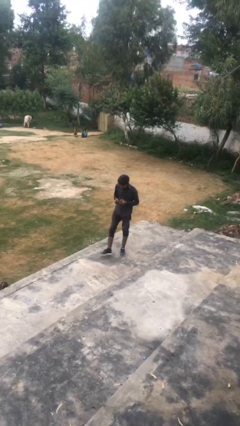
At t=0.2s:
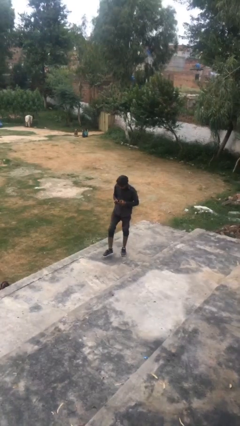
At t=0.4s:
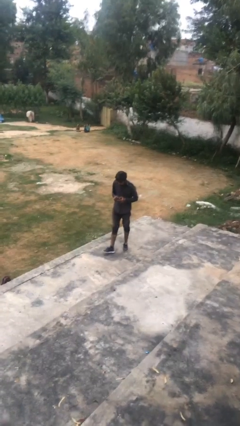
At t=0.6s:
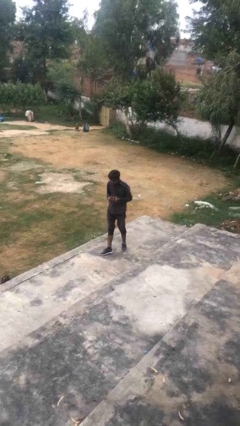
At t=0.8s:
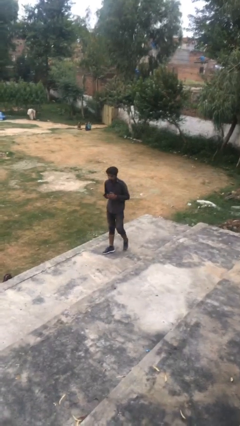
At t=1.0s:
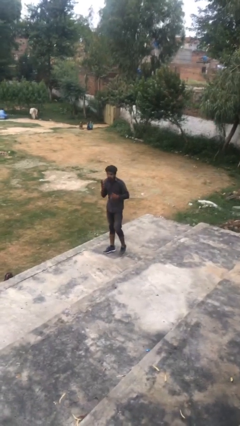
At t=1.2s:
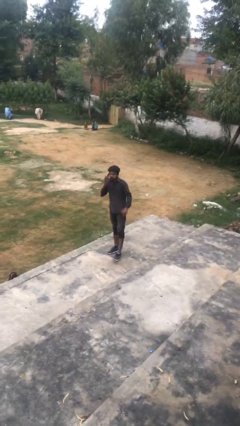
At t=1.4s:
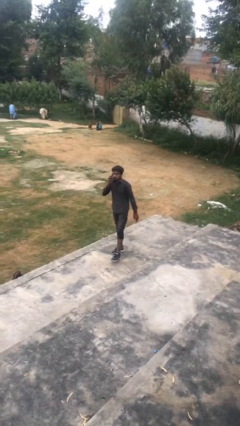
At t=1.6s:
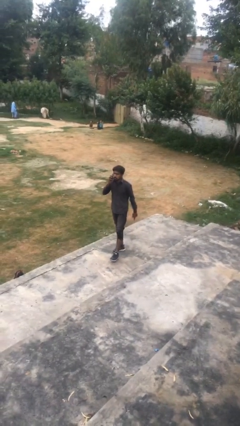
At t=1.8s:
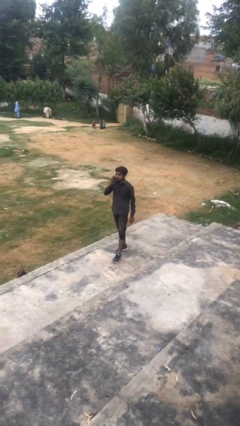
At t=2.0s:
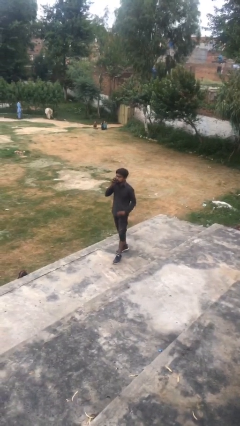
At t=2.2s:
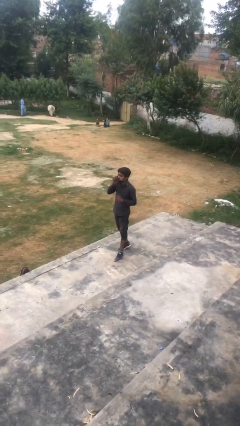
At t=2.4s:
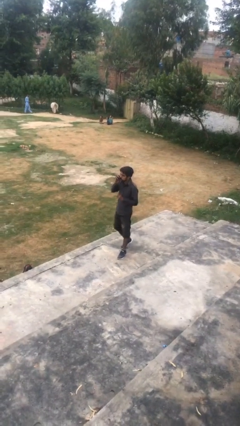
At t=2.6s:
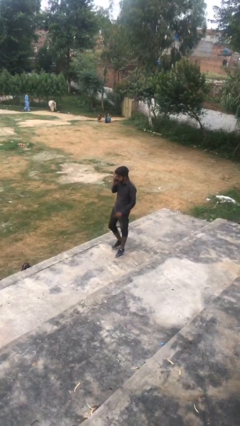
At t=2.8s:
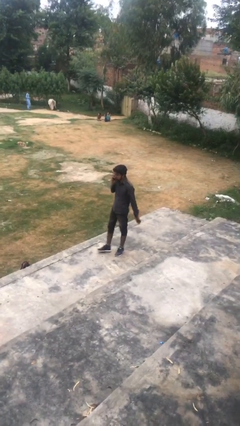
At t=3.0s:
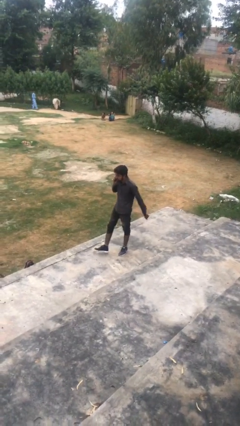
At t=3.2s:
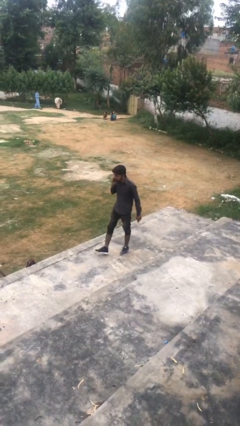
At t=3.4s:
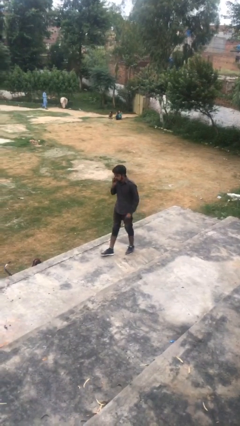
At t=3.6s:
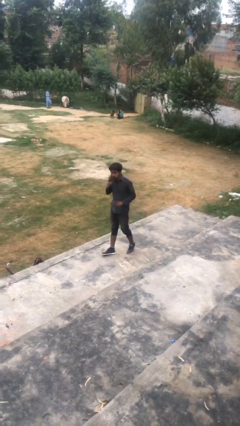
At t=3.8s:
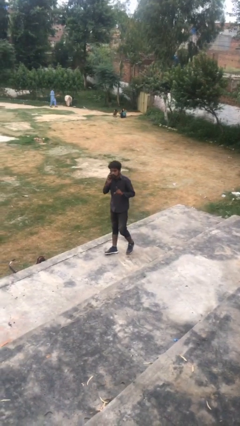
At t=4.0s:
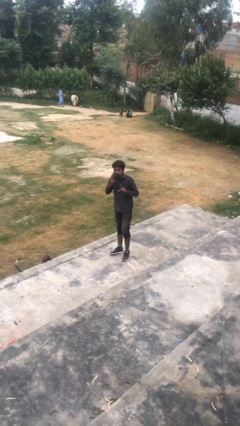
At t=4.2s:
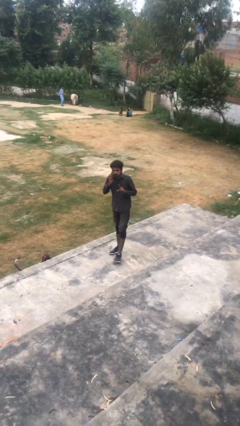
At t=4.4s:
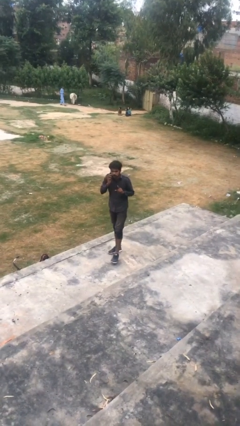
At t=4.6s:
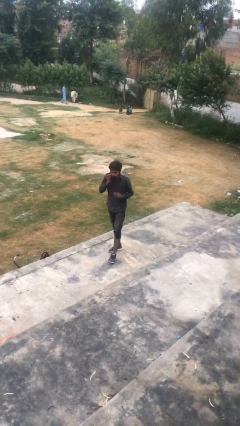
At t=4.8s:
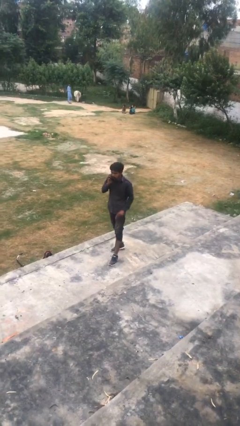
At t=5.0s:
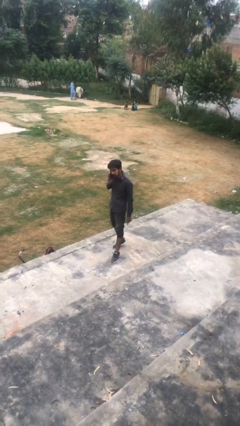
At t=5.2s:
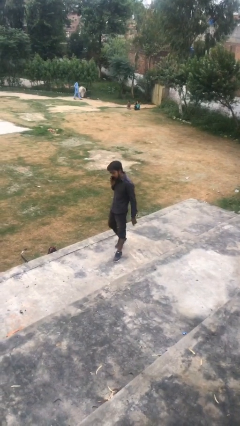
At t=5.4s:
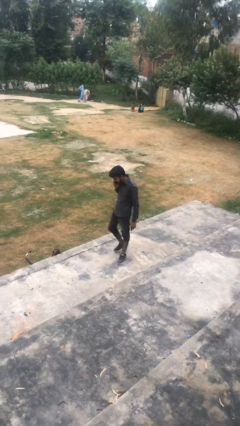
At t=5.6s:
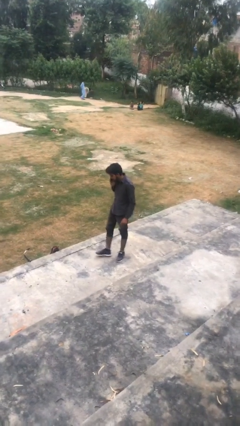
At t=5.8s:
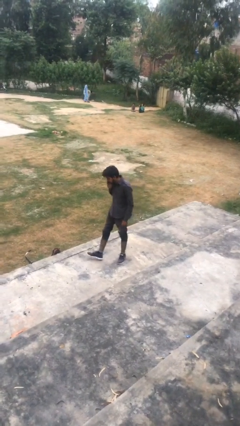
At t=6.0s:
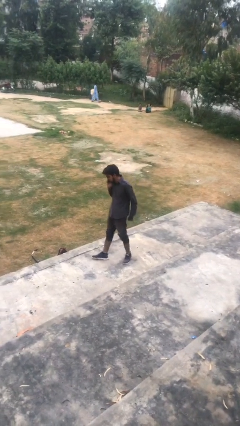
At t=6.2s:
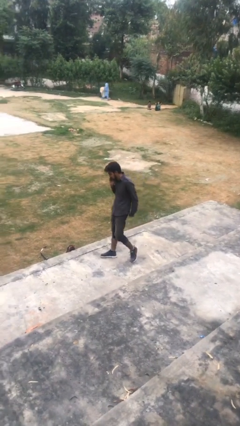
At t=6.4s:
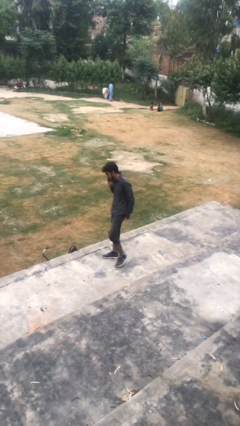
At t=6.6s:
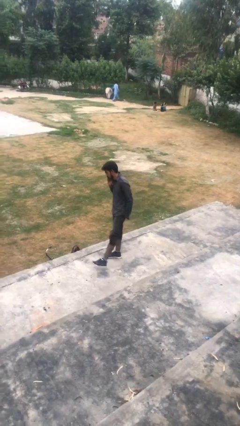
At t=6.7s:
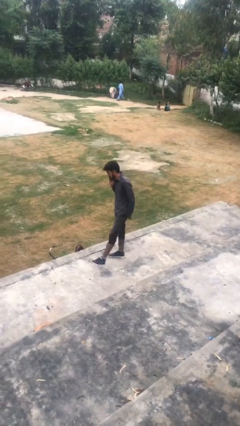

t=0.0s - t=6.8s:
person talks on phone

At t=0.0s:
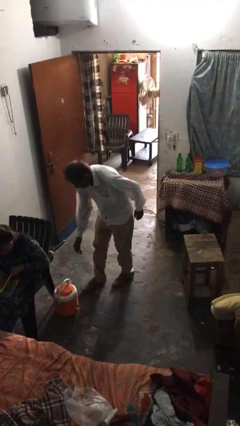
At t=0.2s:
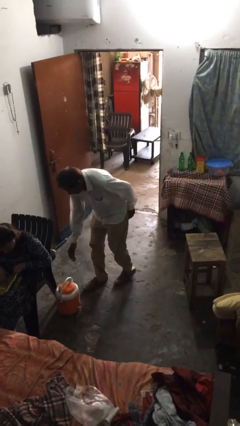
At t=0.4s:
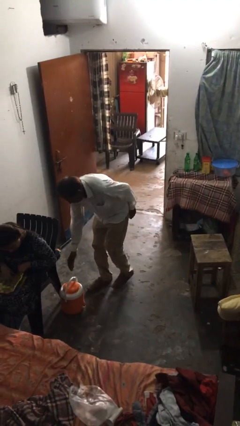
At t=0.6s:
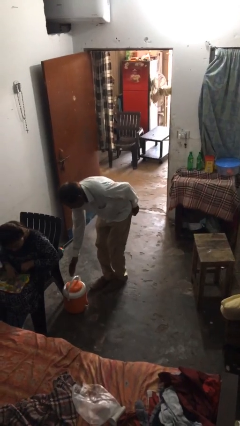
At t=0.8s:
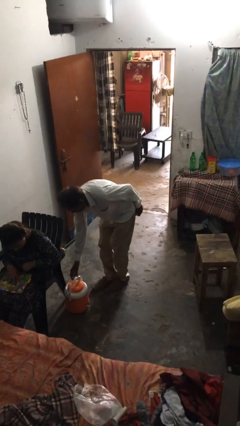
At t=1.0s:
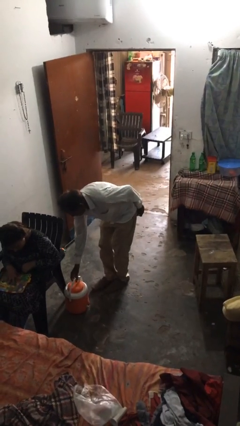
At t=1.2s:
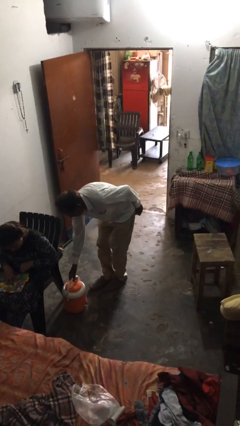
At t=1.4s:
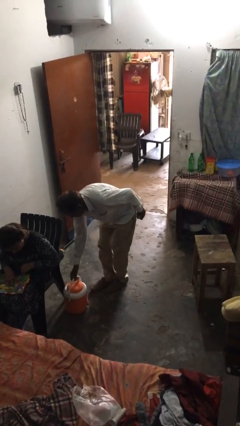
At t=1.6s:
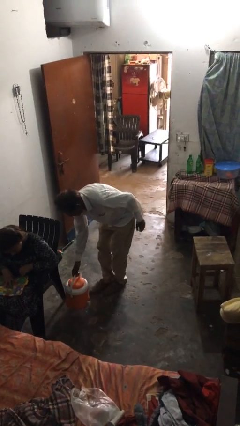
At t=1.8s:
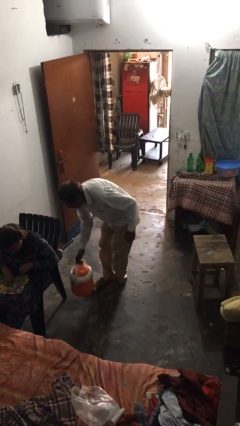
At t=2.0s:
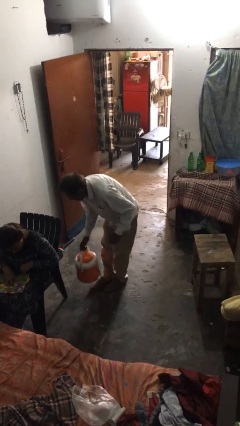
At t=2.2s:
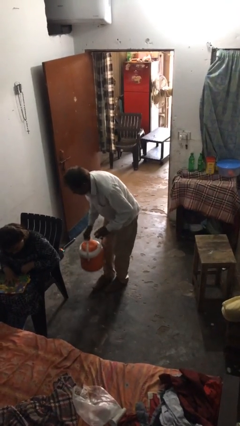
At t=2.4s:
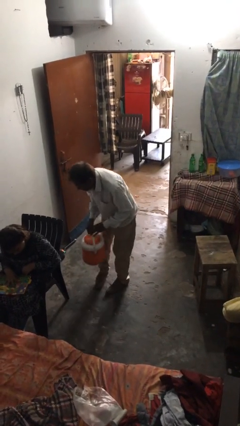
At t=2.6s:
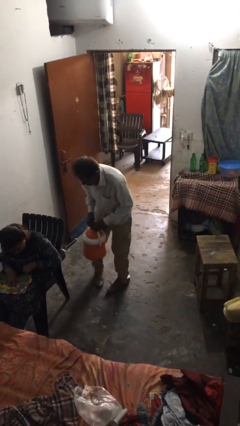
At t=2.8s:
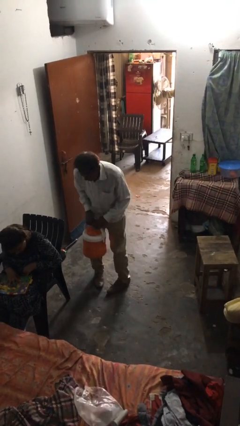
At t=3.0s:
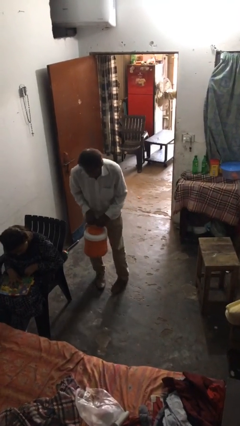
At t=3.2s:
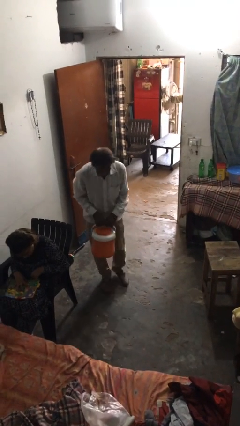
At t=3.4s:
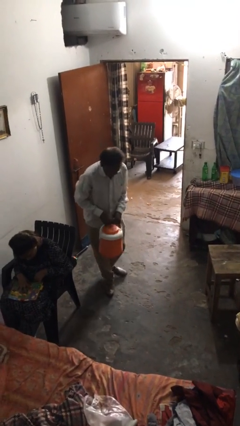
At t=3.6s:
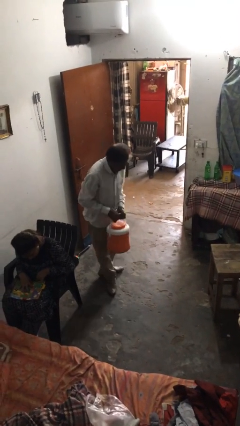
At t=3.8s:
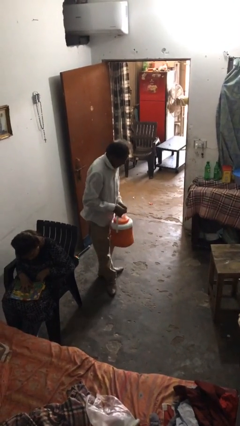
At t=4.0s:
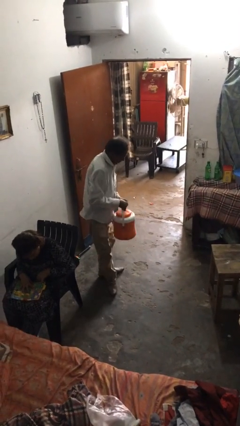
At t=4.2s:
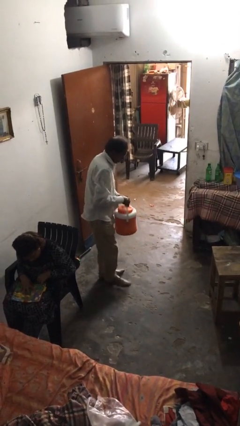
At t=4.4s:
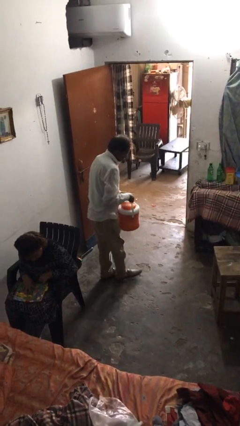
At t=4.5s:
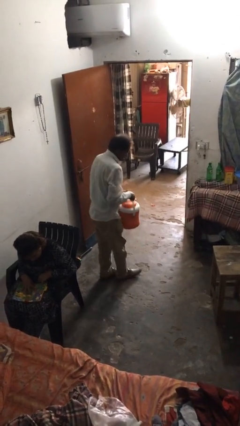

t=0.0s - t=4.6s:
person steals object from person

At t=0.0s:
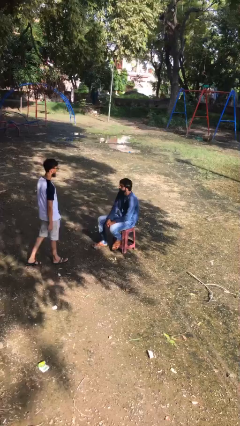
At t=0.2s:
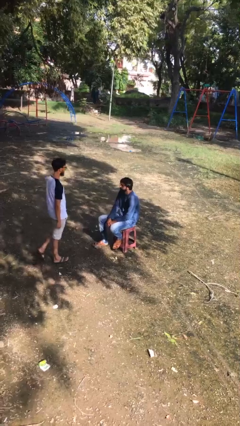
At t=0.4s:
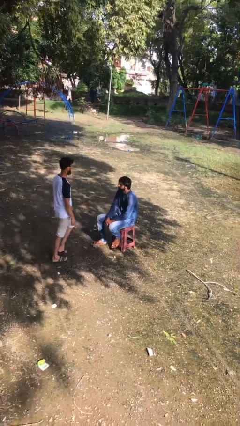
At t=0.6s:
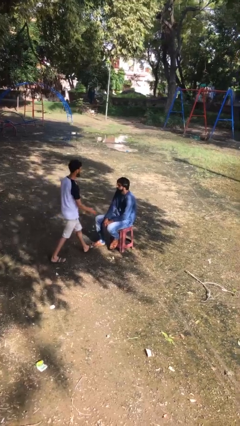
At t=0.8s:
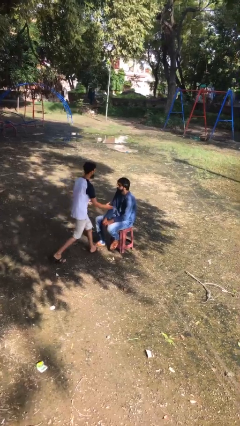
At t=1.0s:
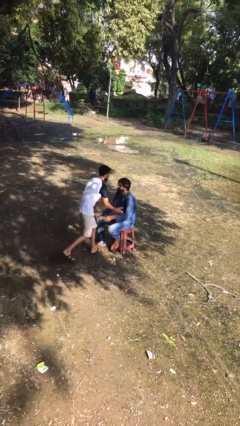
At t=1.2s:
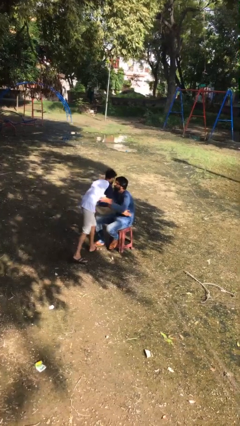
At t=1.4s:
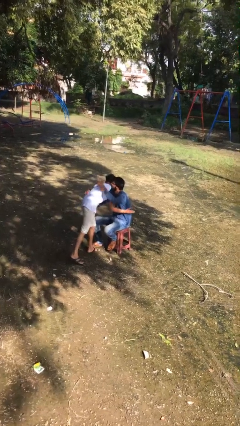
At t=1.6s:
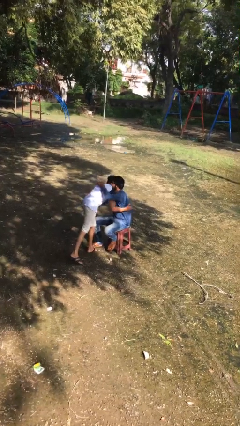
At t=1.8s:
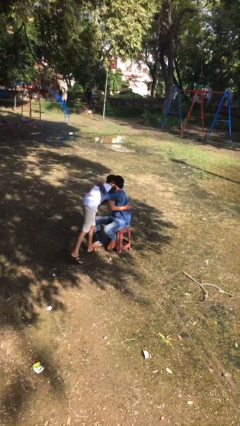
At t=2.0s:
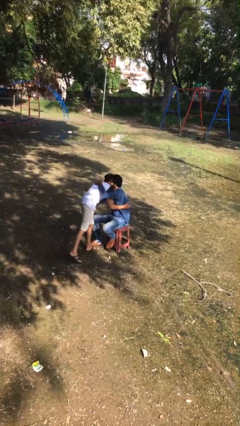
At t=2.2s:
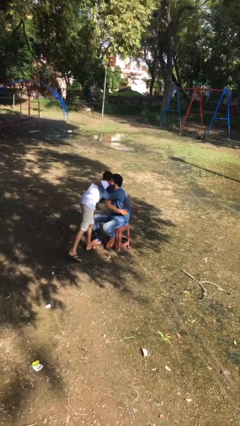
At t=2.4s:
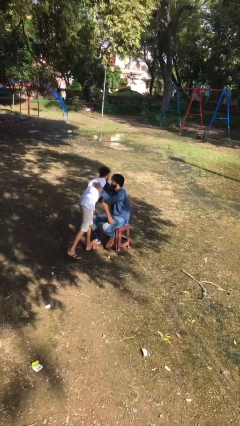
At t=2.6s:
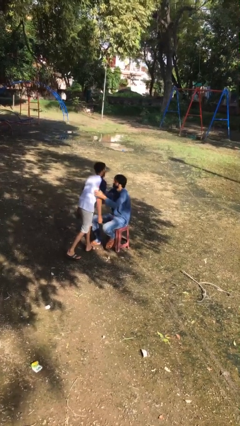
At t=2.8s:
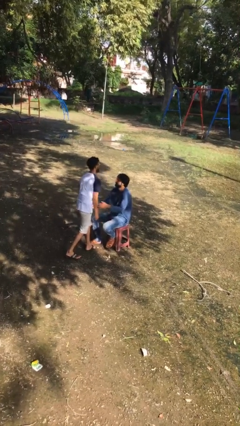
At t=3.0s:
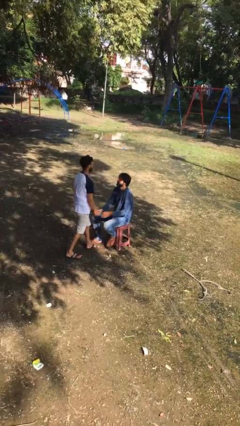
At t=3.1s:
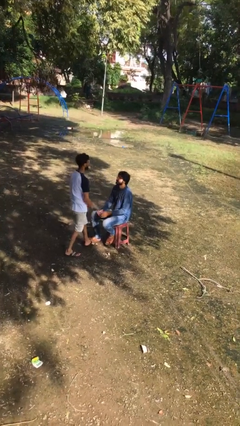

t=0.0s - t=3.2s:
person embraces person

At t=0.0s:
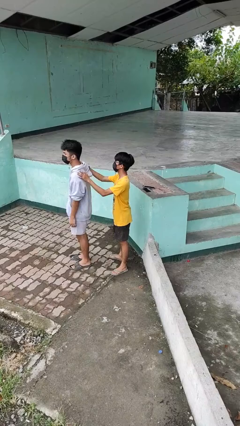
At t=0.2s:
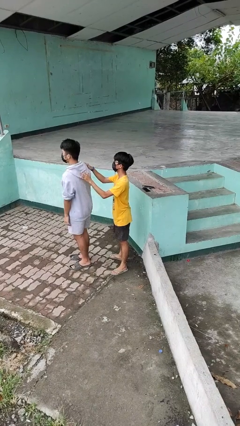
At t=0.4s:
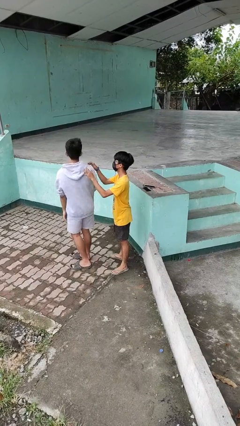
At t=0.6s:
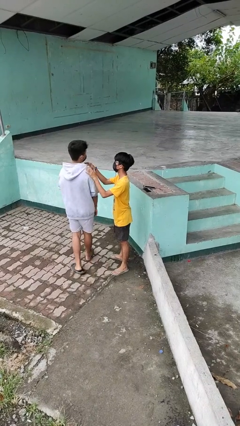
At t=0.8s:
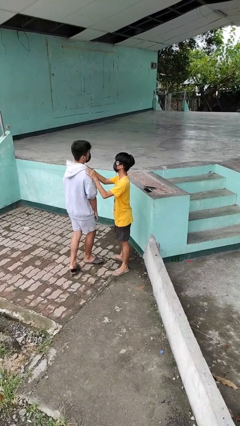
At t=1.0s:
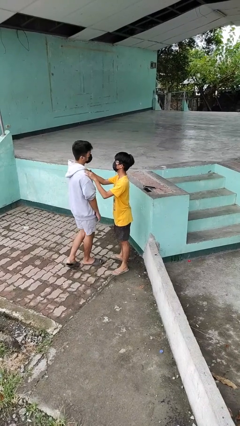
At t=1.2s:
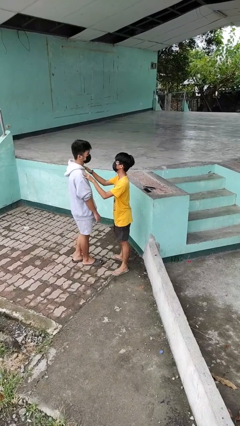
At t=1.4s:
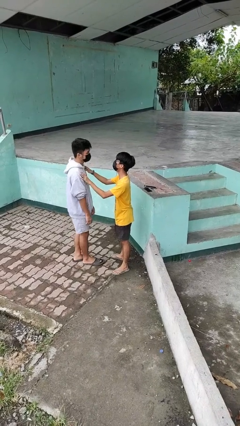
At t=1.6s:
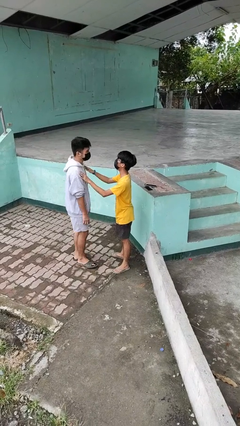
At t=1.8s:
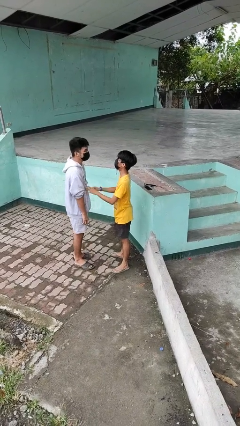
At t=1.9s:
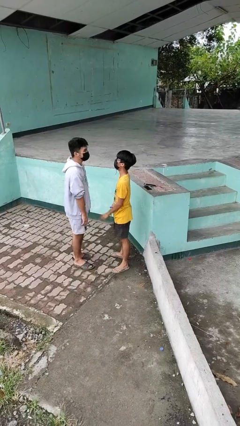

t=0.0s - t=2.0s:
person spins person around

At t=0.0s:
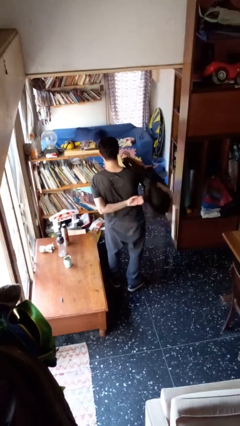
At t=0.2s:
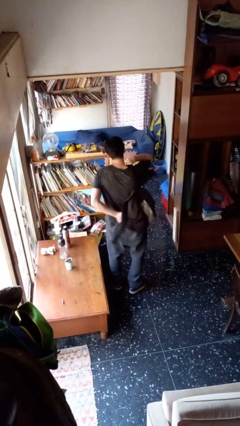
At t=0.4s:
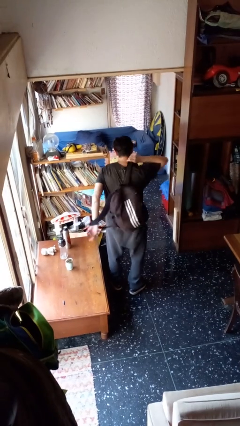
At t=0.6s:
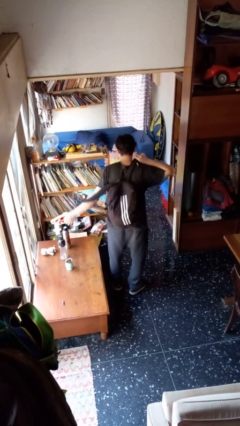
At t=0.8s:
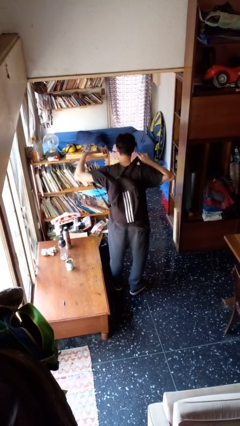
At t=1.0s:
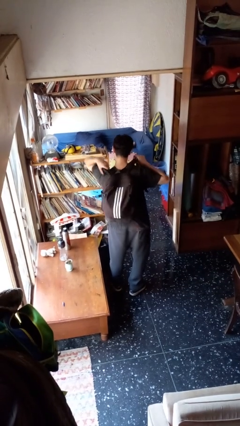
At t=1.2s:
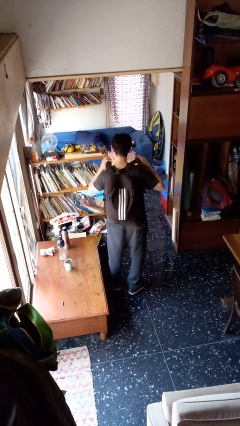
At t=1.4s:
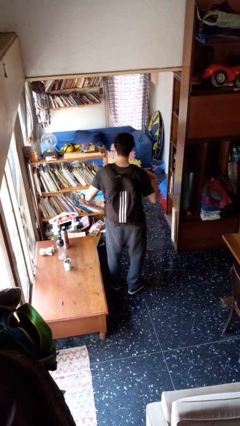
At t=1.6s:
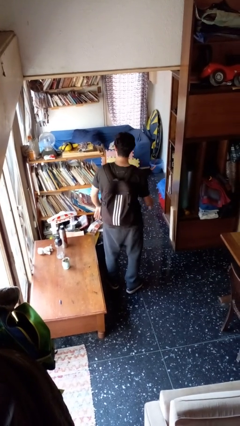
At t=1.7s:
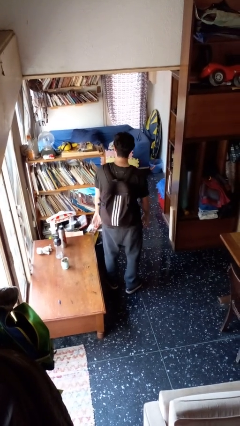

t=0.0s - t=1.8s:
person puts on backpack
